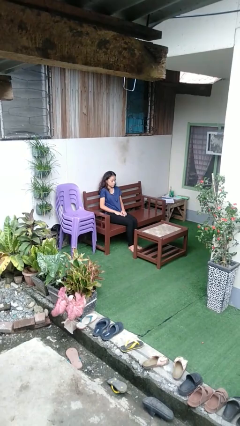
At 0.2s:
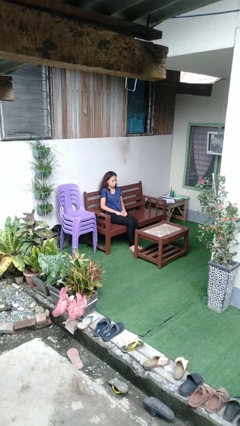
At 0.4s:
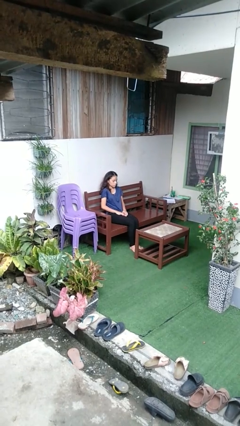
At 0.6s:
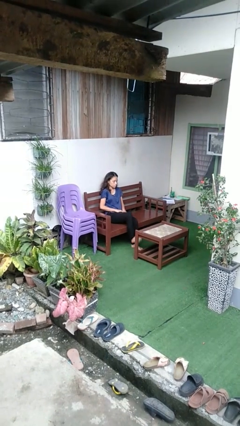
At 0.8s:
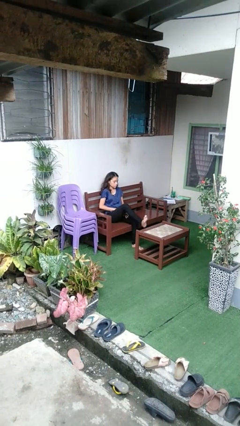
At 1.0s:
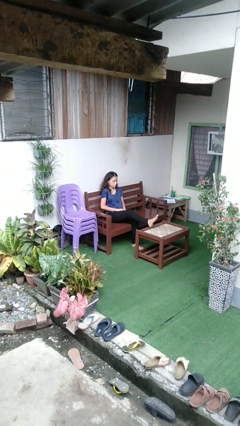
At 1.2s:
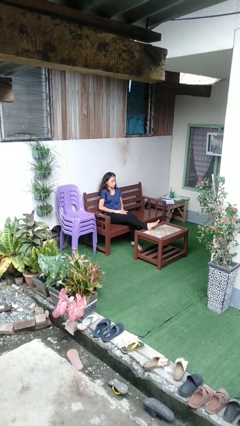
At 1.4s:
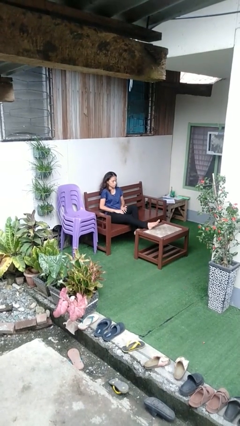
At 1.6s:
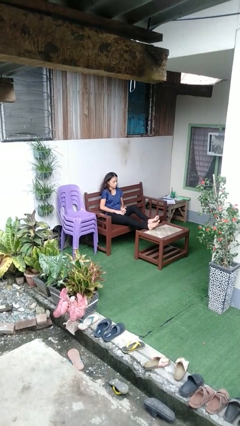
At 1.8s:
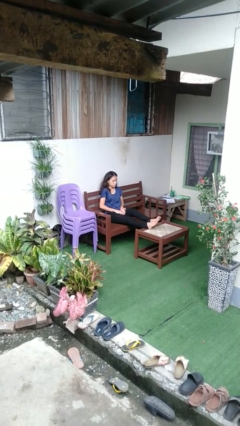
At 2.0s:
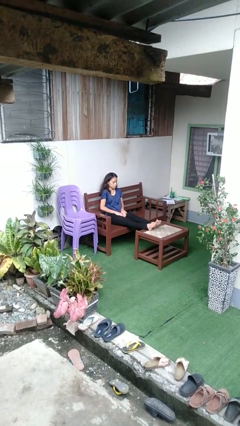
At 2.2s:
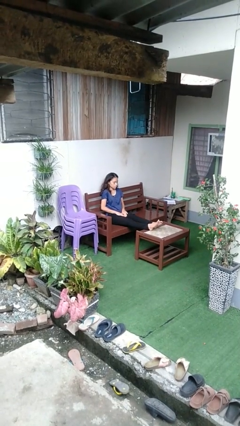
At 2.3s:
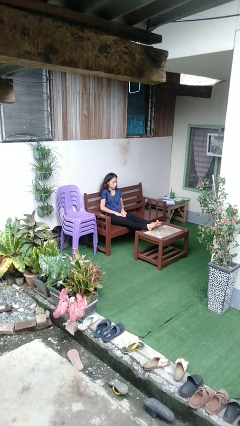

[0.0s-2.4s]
person puts feet up

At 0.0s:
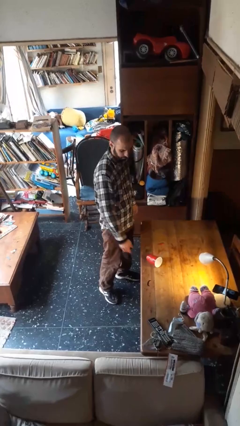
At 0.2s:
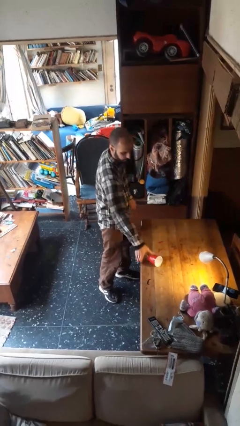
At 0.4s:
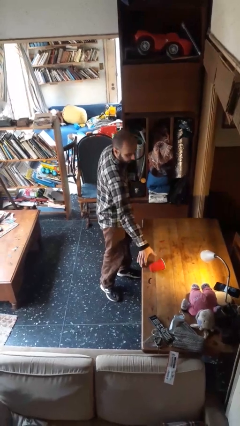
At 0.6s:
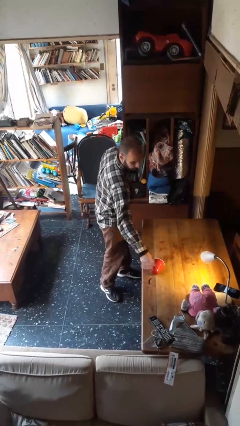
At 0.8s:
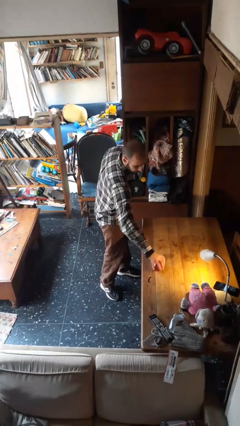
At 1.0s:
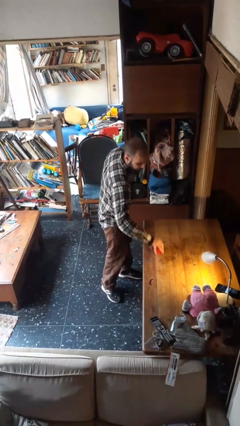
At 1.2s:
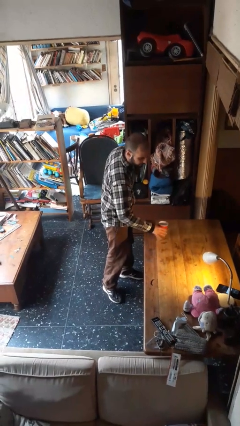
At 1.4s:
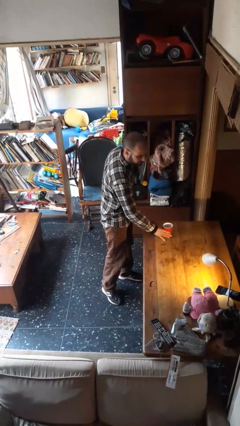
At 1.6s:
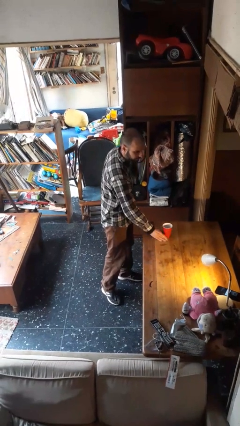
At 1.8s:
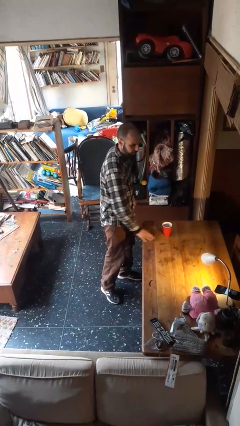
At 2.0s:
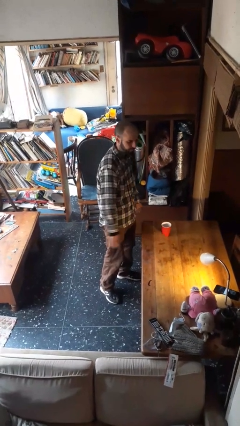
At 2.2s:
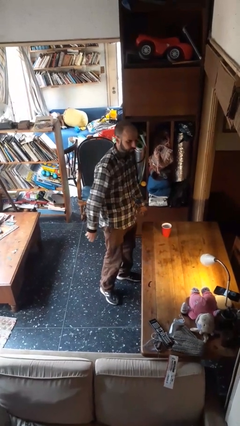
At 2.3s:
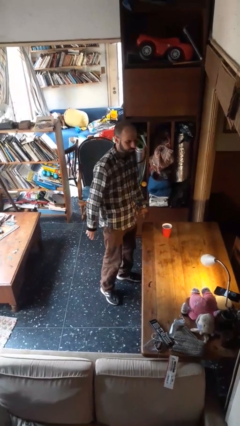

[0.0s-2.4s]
person sets upright glass

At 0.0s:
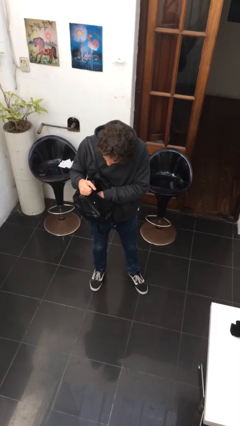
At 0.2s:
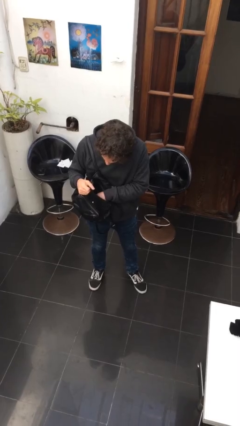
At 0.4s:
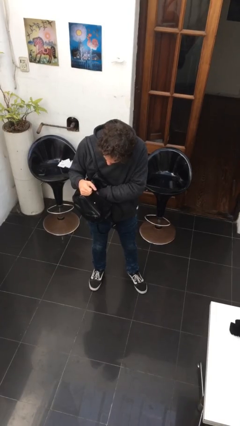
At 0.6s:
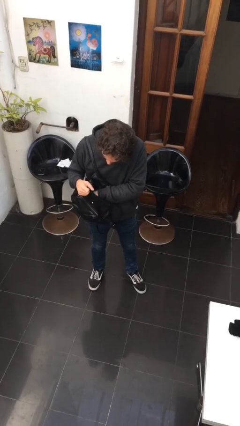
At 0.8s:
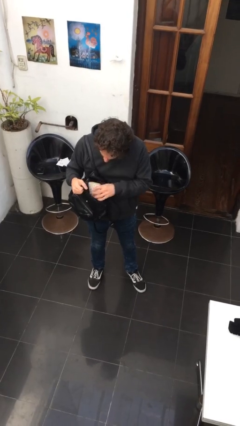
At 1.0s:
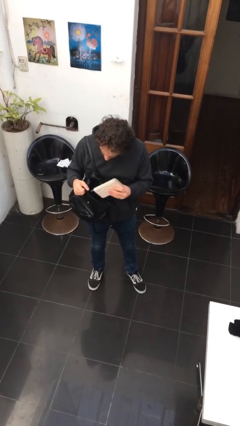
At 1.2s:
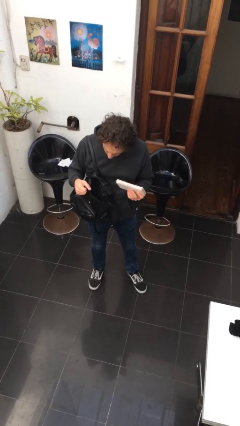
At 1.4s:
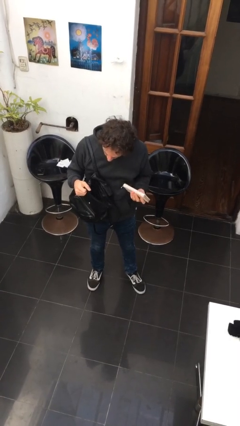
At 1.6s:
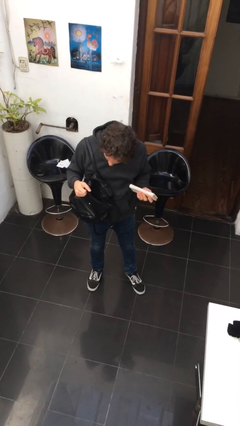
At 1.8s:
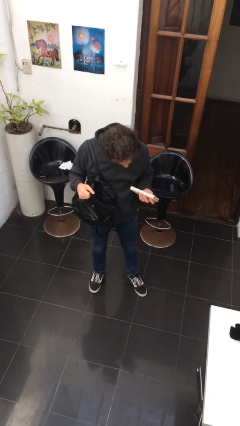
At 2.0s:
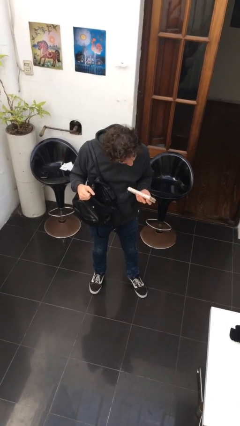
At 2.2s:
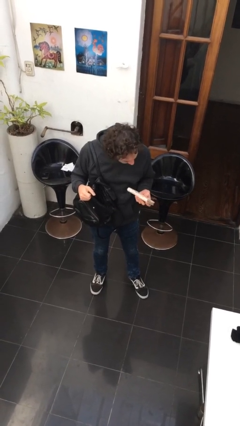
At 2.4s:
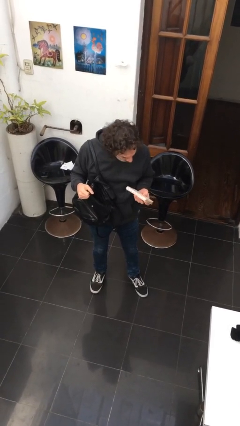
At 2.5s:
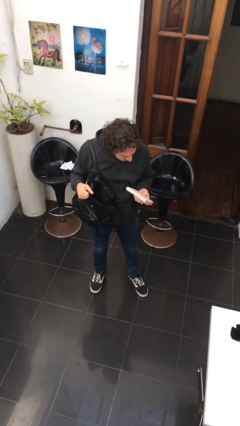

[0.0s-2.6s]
person takes object from purse

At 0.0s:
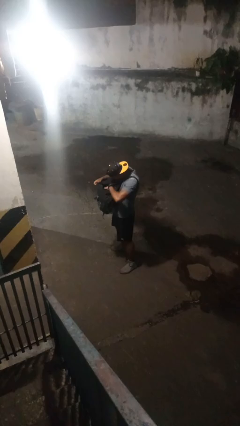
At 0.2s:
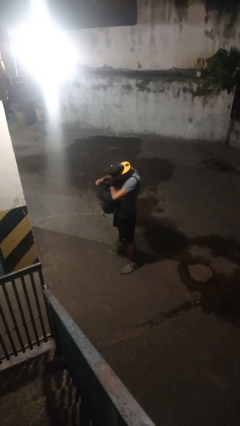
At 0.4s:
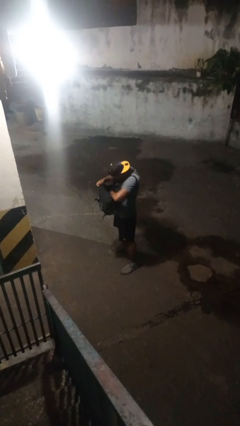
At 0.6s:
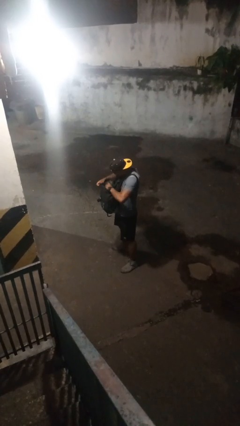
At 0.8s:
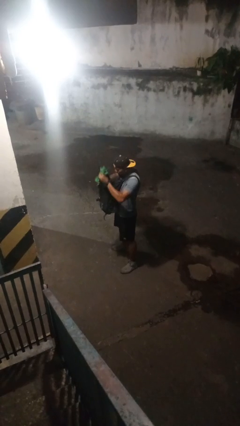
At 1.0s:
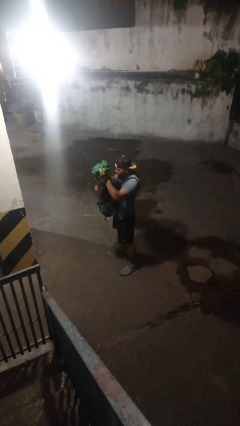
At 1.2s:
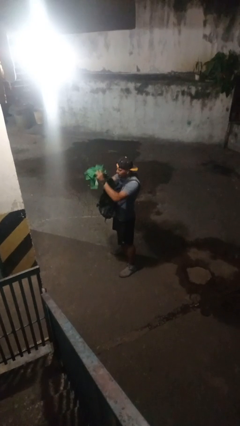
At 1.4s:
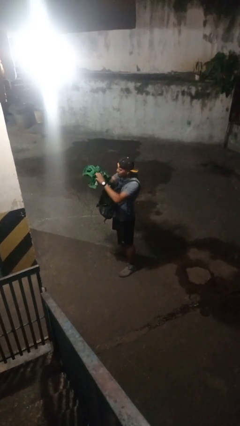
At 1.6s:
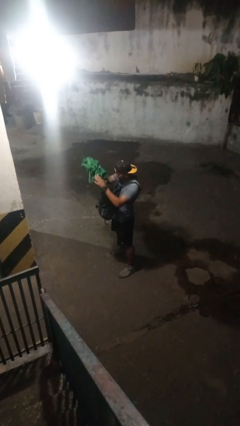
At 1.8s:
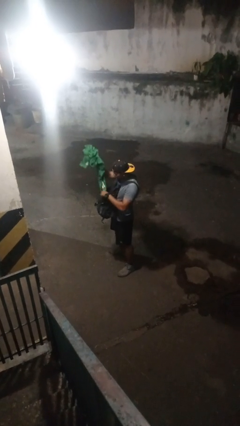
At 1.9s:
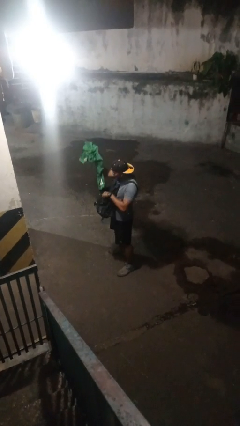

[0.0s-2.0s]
person takes object from backpack

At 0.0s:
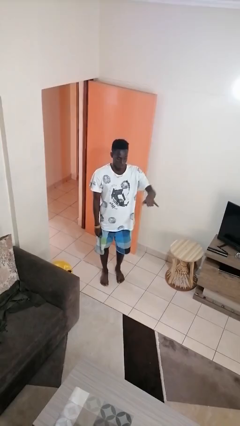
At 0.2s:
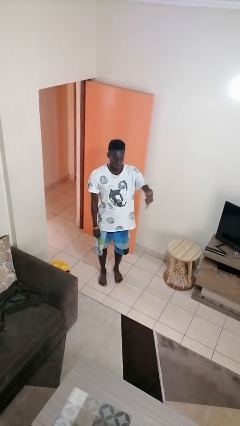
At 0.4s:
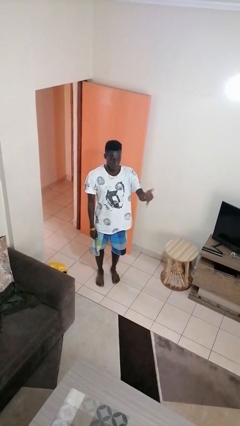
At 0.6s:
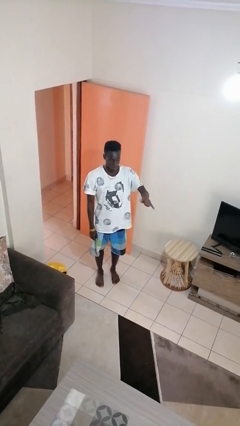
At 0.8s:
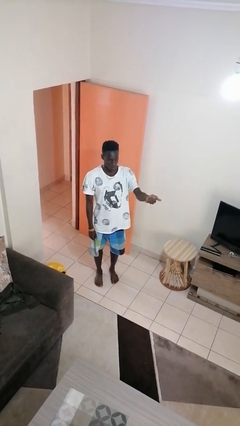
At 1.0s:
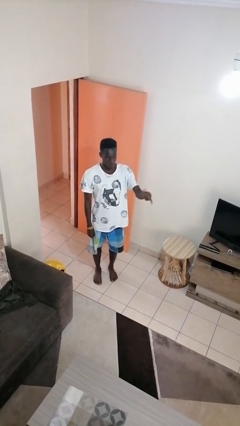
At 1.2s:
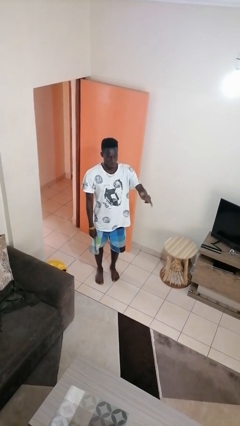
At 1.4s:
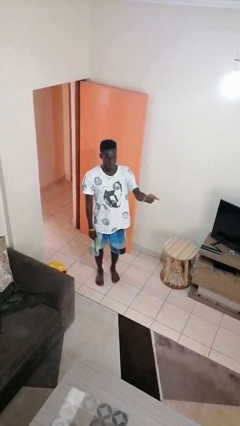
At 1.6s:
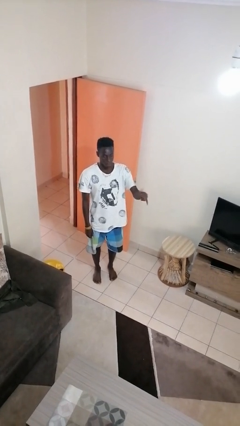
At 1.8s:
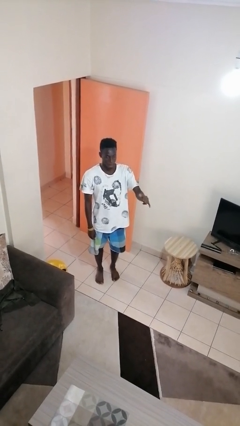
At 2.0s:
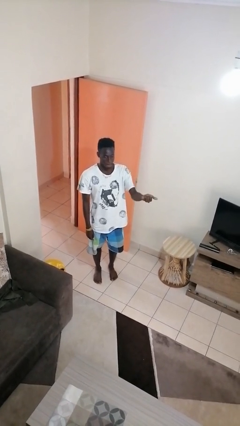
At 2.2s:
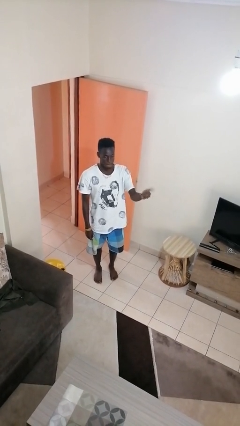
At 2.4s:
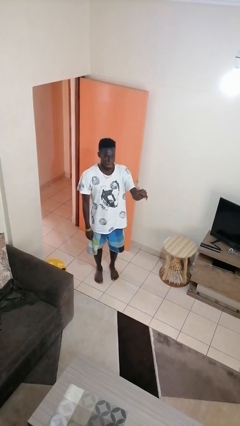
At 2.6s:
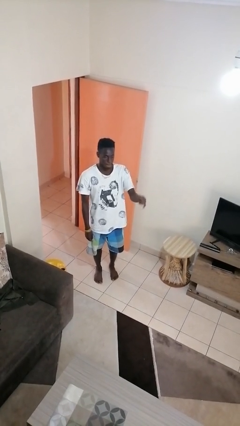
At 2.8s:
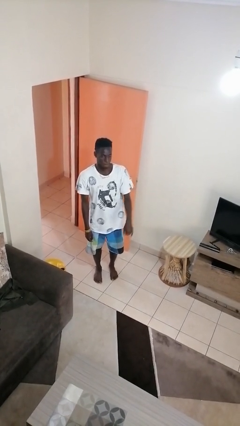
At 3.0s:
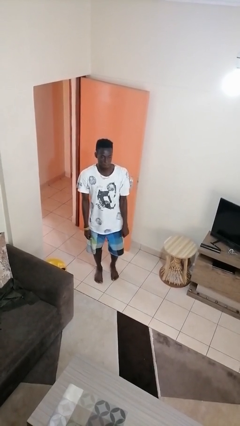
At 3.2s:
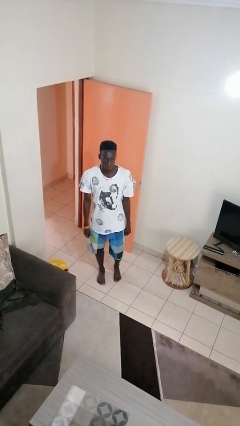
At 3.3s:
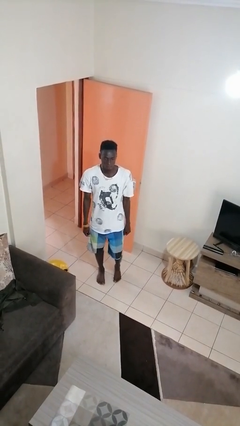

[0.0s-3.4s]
person gestures hang loose

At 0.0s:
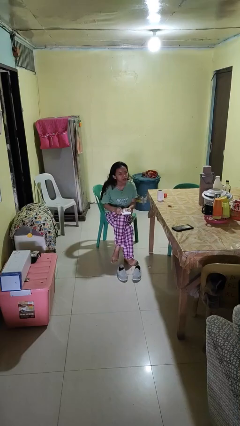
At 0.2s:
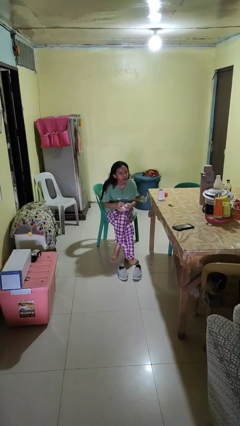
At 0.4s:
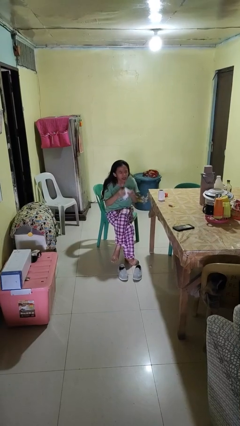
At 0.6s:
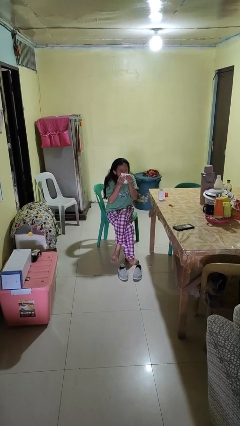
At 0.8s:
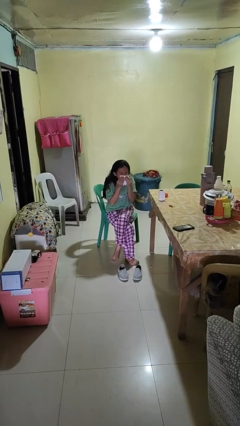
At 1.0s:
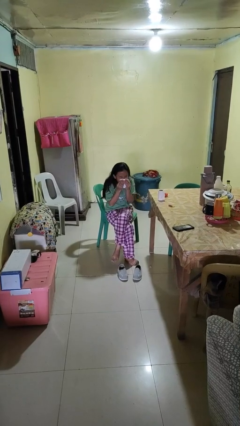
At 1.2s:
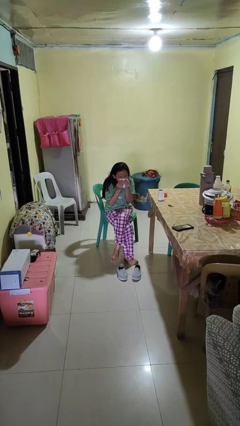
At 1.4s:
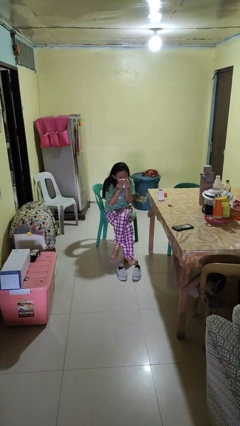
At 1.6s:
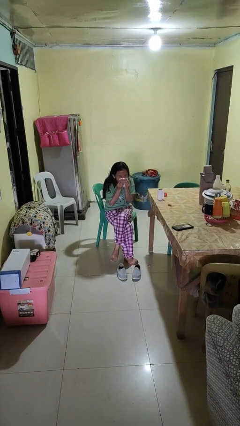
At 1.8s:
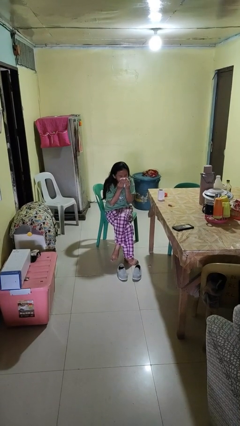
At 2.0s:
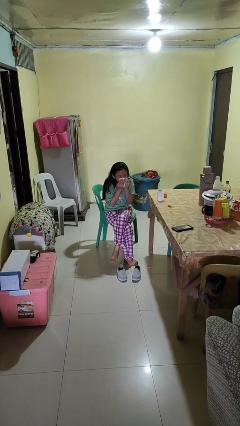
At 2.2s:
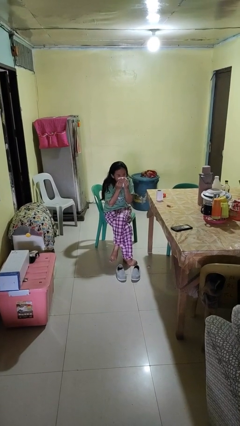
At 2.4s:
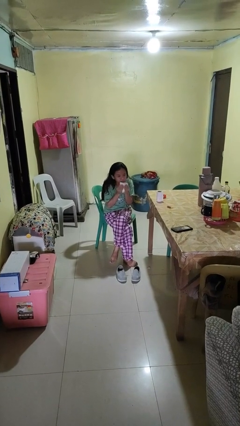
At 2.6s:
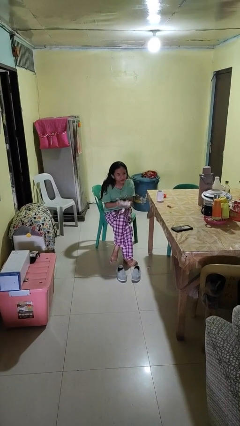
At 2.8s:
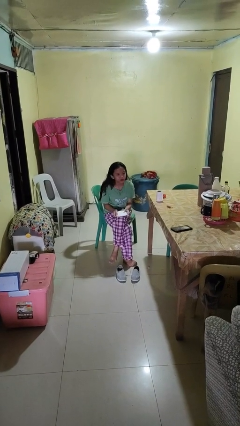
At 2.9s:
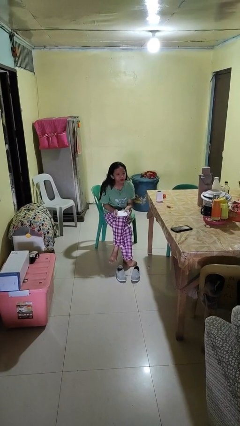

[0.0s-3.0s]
person blows nose

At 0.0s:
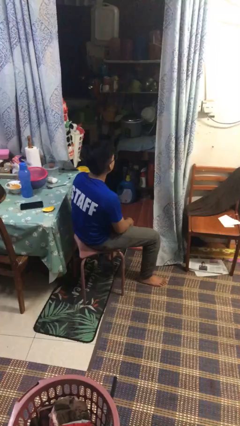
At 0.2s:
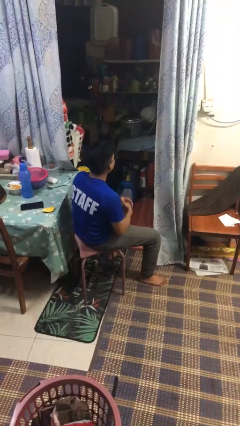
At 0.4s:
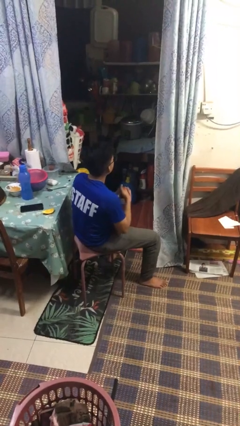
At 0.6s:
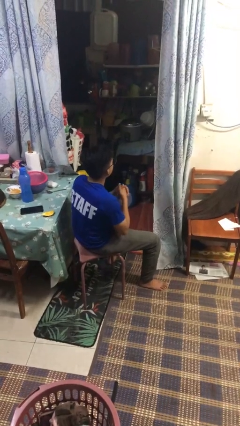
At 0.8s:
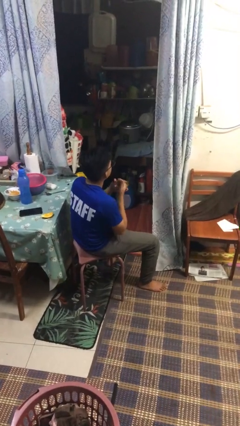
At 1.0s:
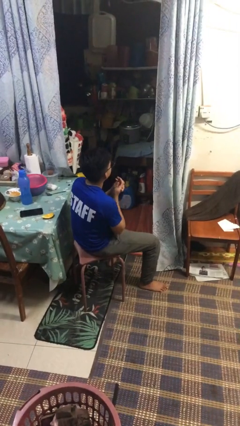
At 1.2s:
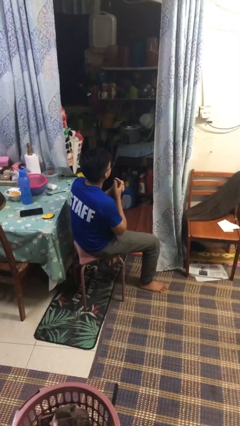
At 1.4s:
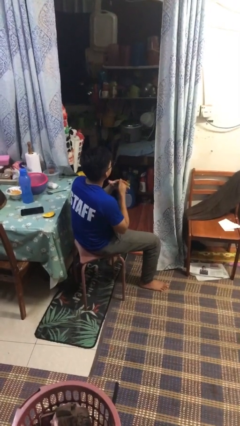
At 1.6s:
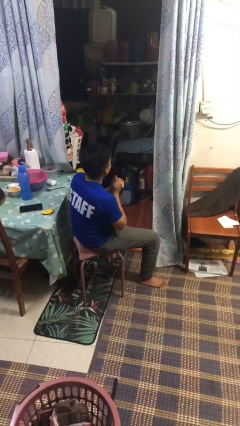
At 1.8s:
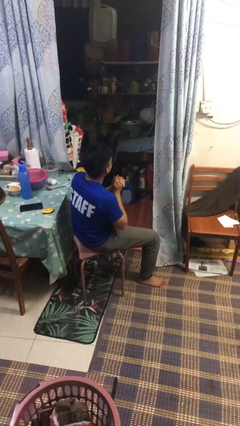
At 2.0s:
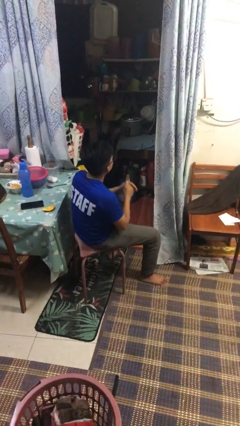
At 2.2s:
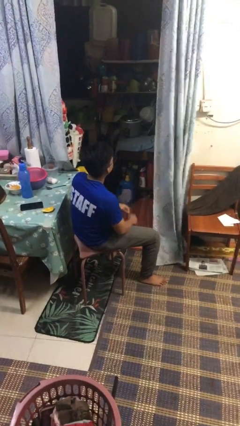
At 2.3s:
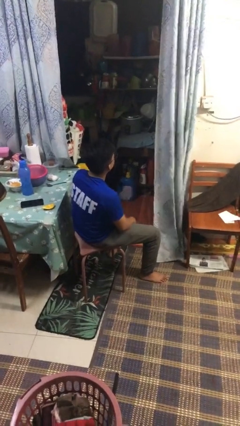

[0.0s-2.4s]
person cracks knuckles
